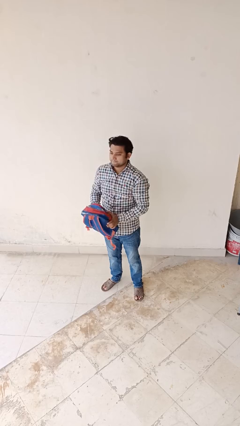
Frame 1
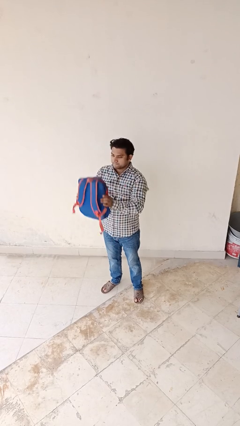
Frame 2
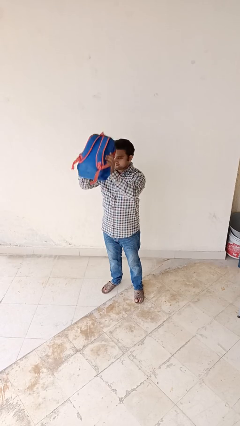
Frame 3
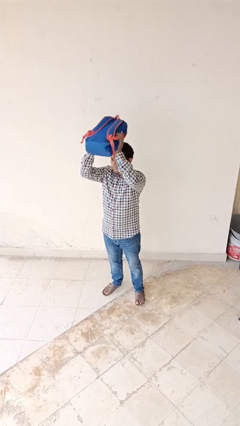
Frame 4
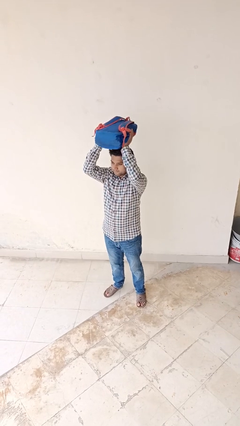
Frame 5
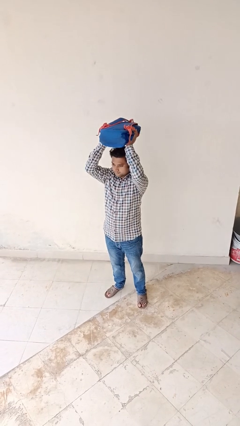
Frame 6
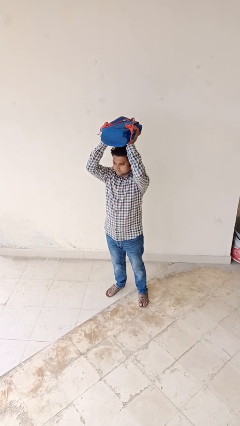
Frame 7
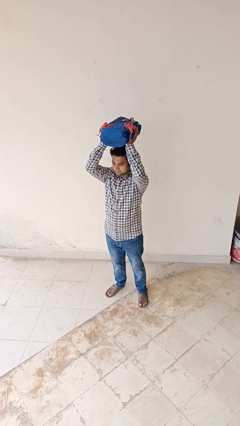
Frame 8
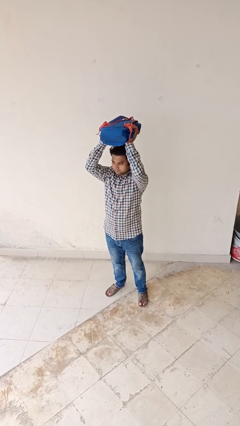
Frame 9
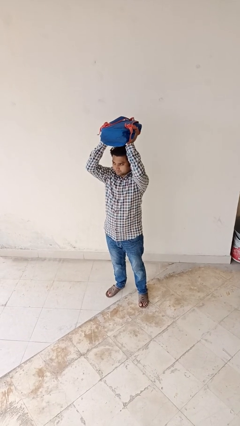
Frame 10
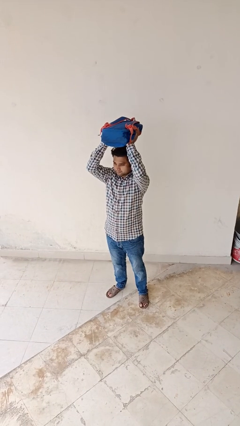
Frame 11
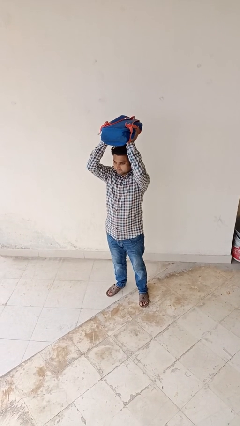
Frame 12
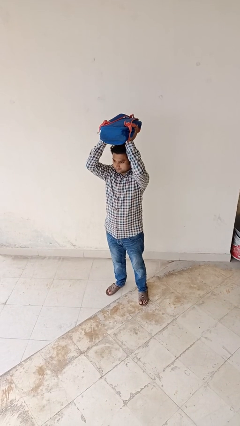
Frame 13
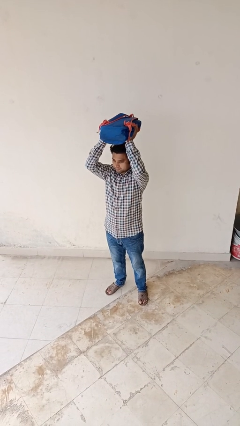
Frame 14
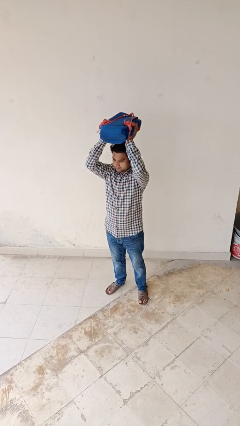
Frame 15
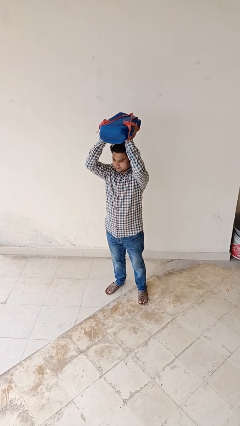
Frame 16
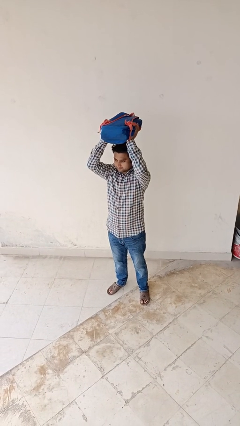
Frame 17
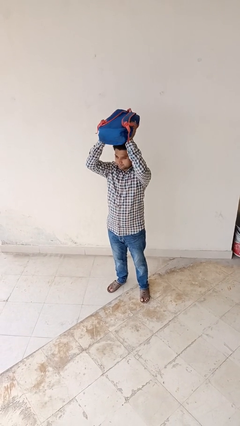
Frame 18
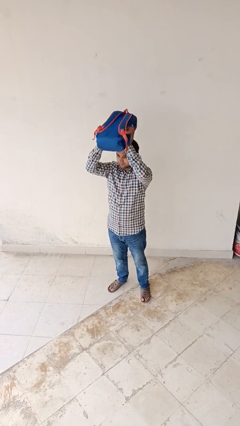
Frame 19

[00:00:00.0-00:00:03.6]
person holds object above head

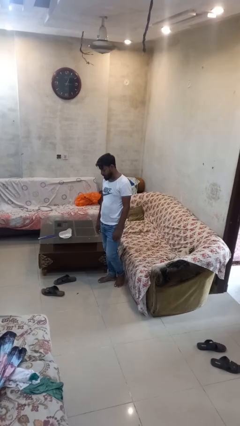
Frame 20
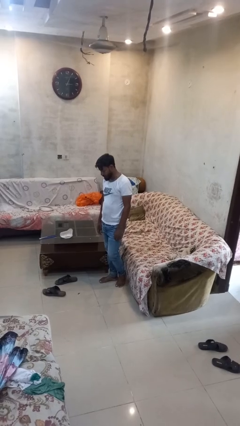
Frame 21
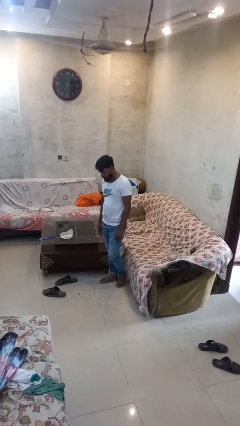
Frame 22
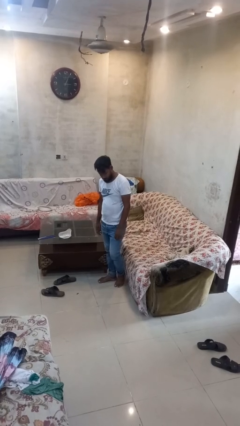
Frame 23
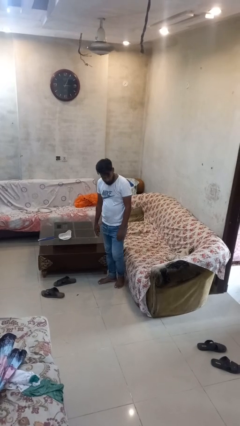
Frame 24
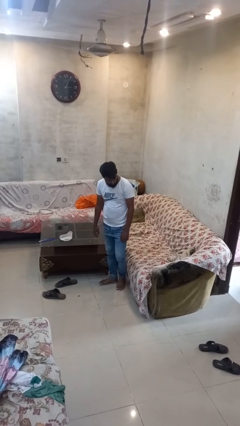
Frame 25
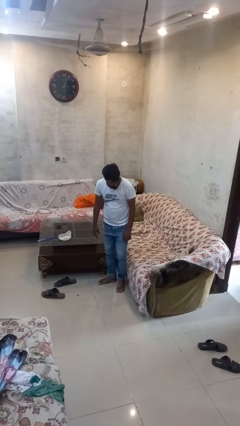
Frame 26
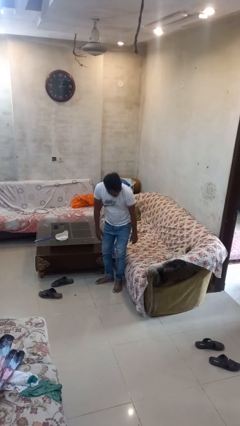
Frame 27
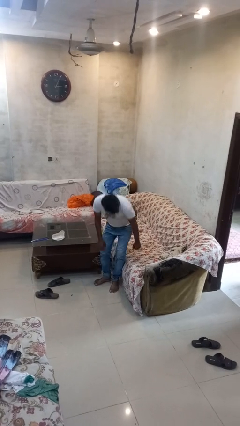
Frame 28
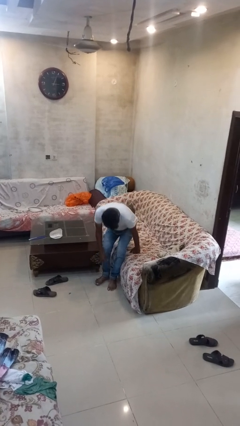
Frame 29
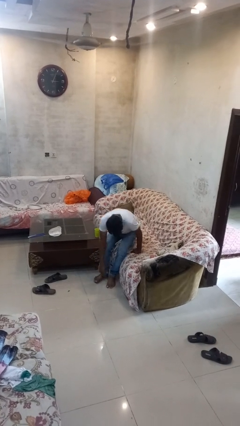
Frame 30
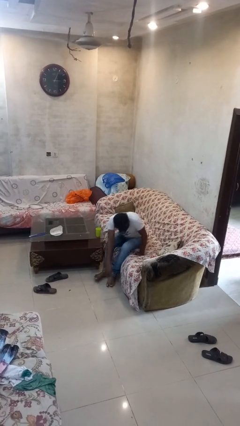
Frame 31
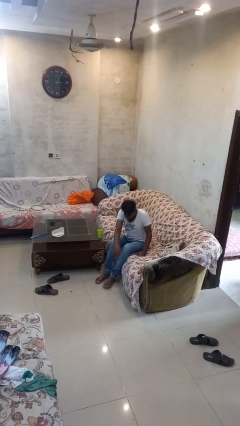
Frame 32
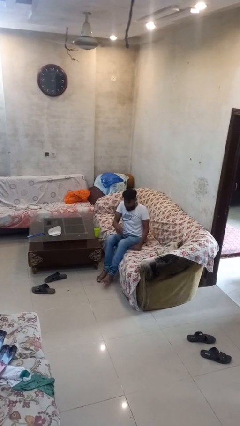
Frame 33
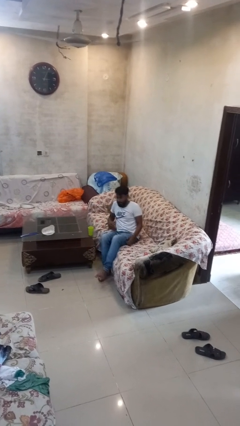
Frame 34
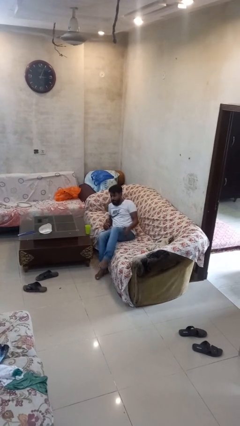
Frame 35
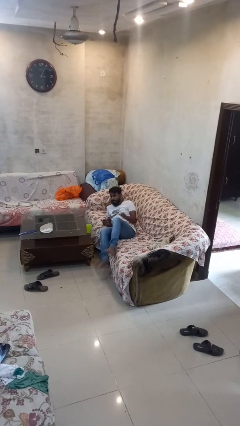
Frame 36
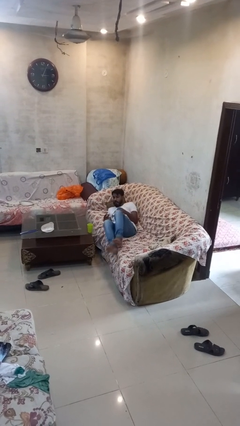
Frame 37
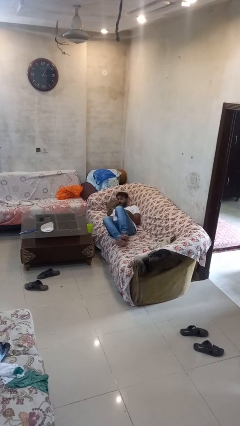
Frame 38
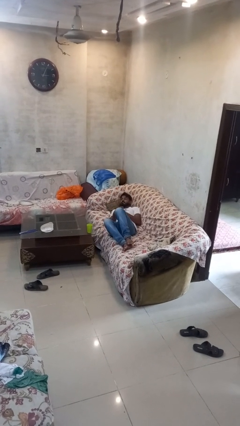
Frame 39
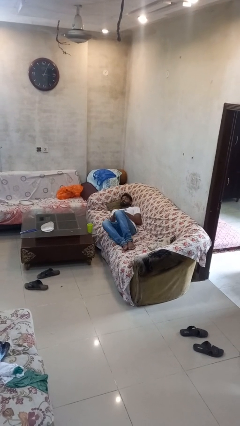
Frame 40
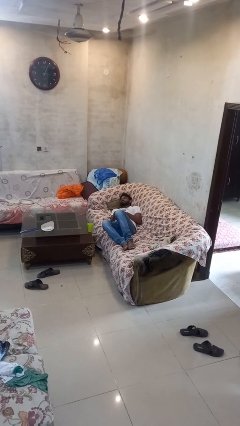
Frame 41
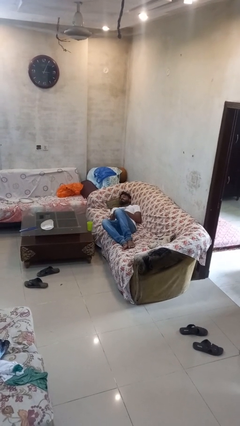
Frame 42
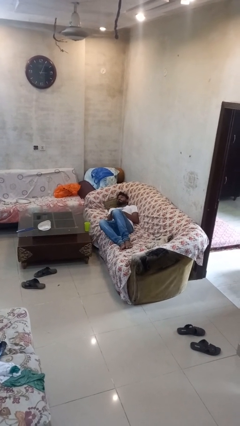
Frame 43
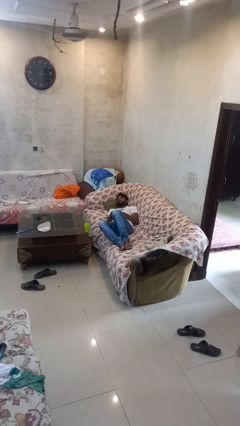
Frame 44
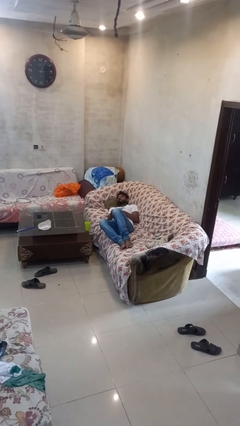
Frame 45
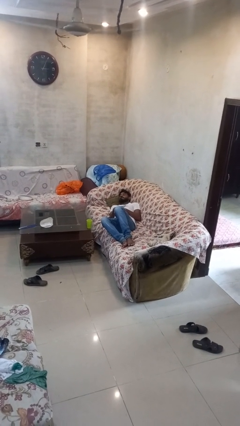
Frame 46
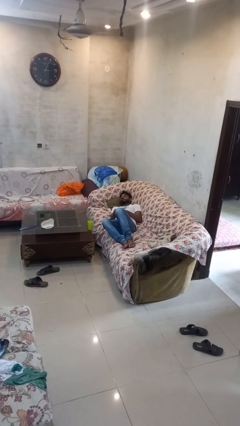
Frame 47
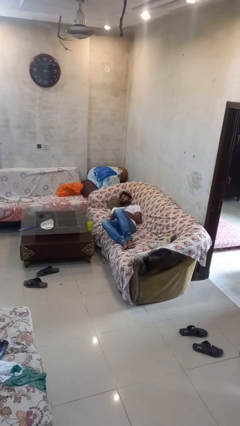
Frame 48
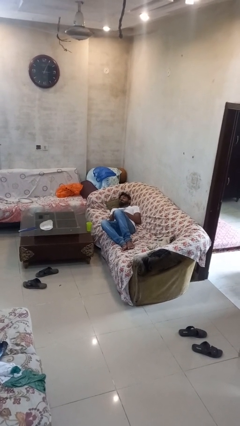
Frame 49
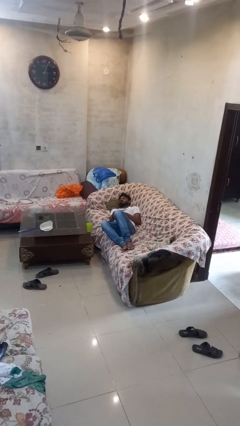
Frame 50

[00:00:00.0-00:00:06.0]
person lies down on couch

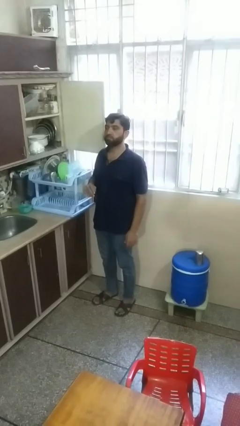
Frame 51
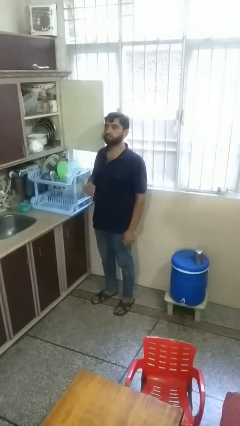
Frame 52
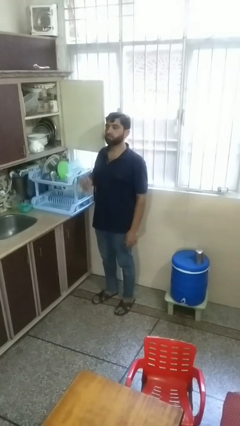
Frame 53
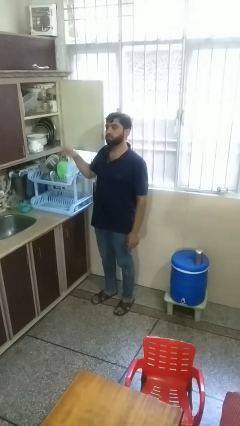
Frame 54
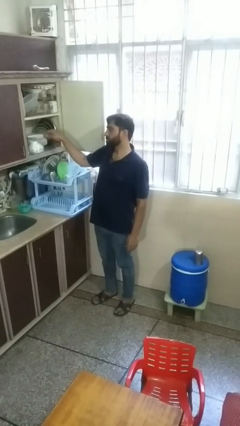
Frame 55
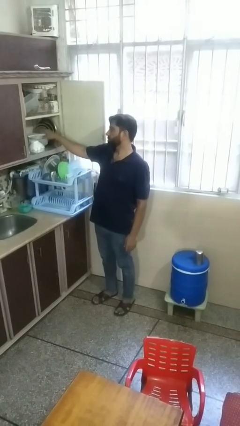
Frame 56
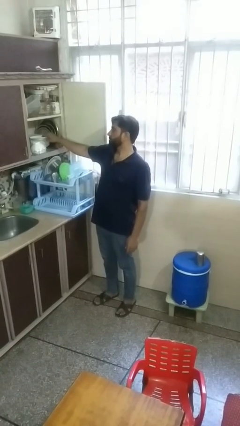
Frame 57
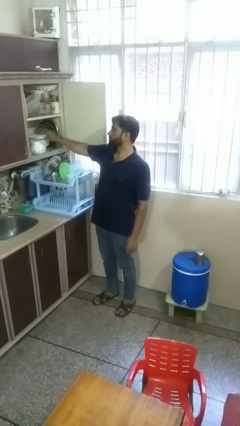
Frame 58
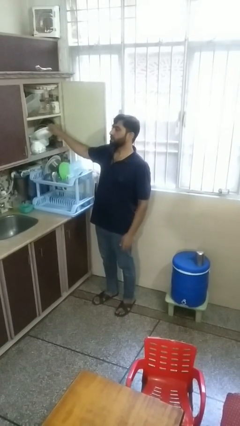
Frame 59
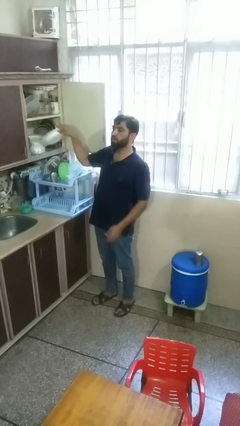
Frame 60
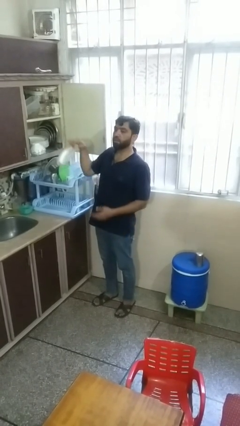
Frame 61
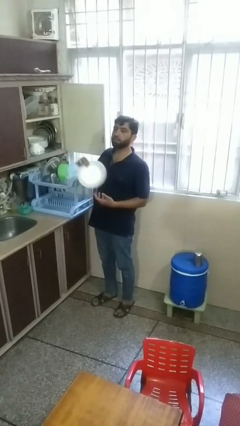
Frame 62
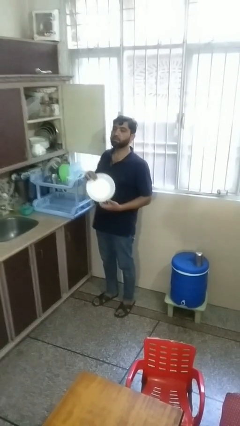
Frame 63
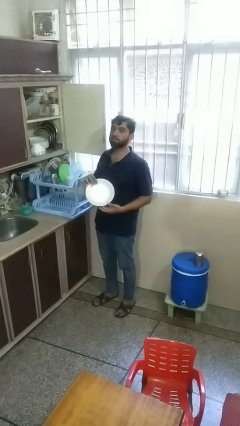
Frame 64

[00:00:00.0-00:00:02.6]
person takes object from cabinet

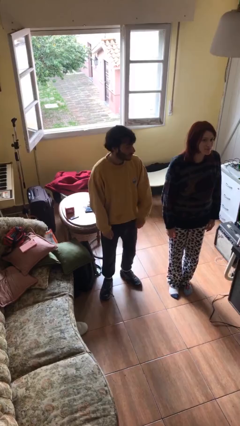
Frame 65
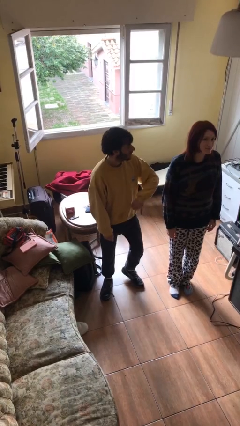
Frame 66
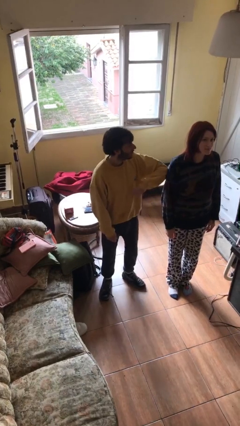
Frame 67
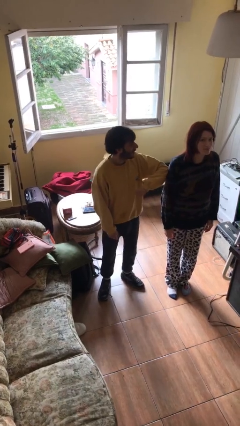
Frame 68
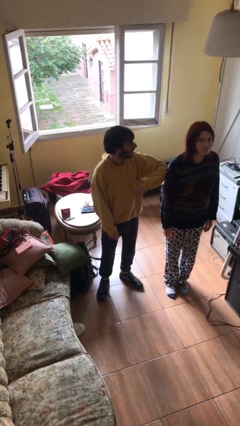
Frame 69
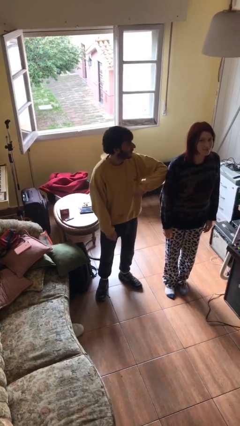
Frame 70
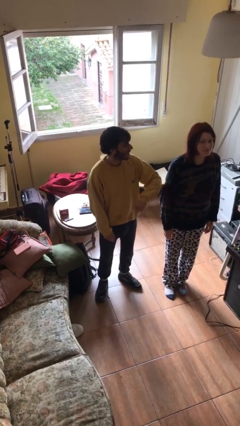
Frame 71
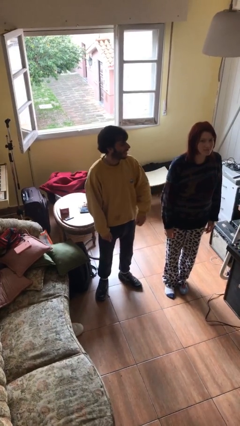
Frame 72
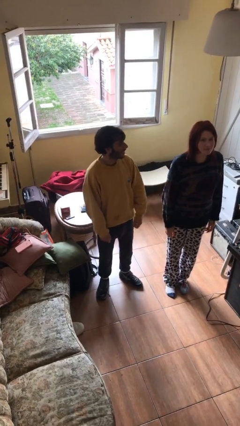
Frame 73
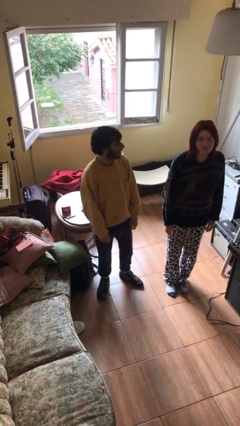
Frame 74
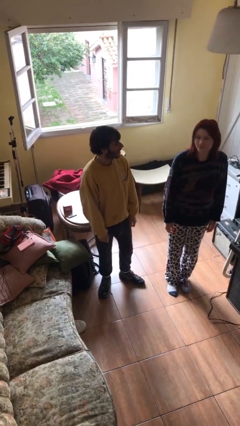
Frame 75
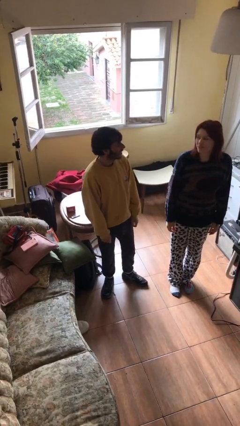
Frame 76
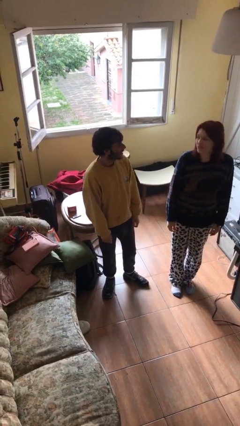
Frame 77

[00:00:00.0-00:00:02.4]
person nudges person with elbow

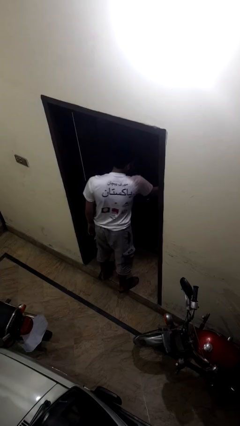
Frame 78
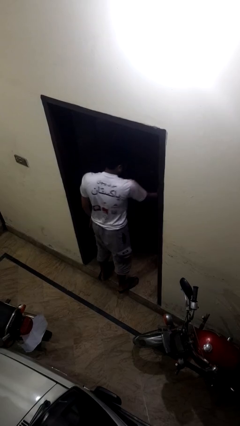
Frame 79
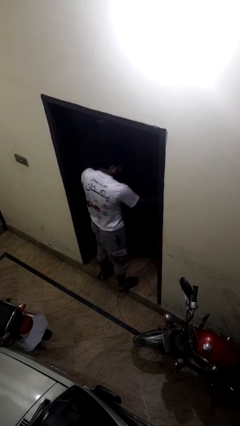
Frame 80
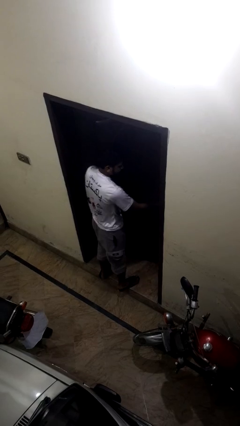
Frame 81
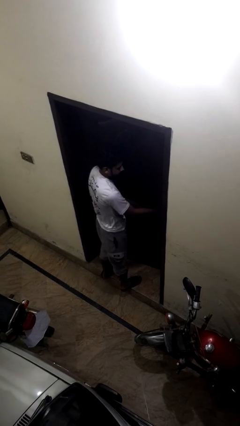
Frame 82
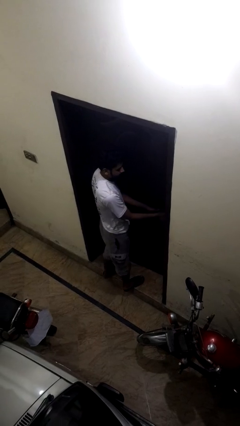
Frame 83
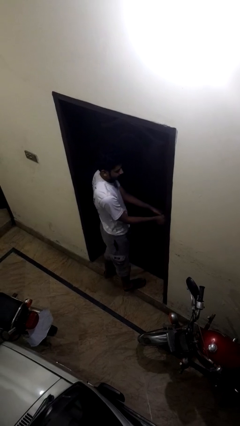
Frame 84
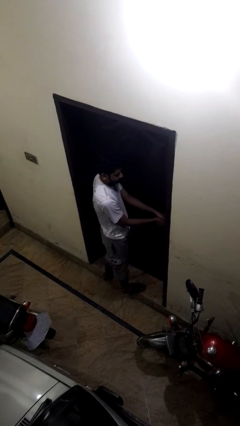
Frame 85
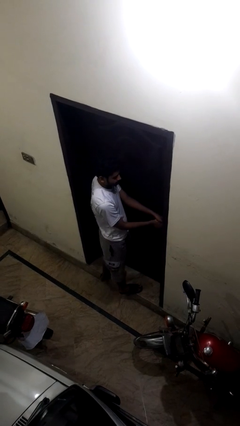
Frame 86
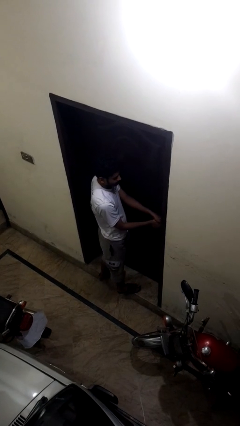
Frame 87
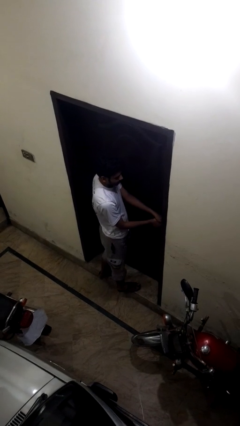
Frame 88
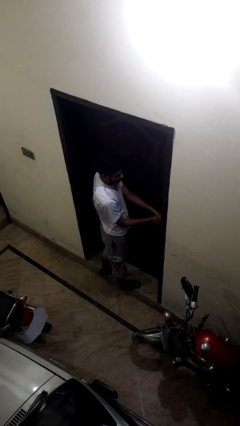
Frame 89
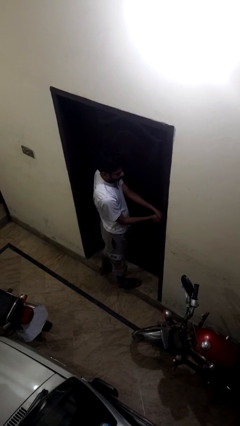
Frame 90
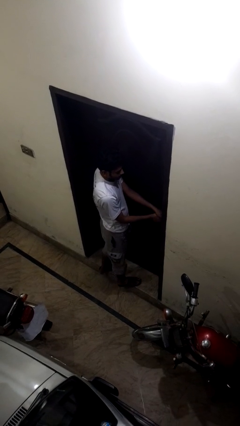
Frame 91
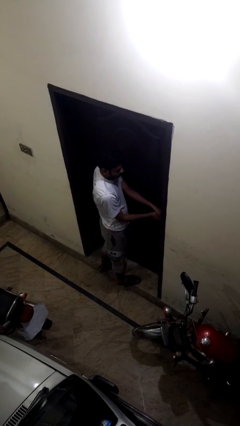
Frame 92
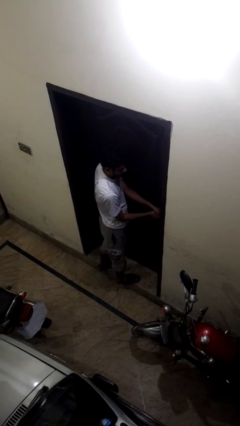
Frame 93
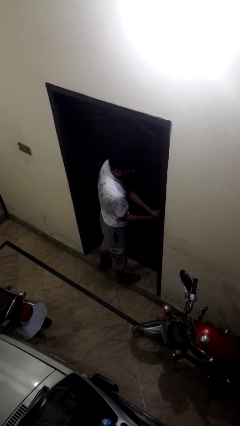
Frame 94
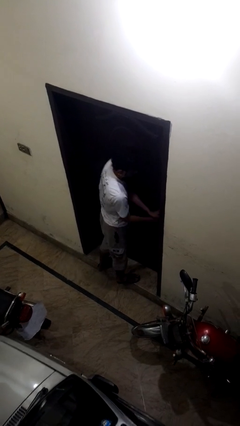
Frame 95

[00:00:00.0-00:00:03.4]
person closes facility door
